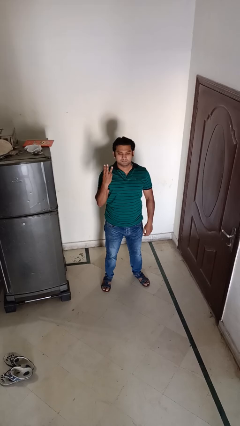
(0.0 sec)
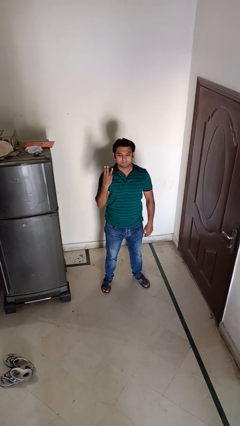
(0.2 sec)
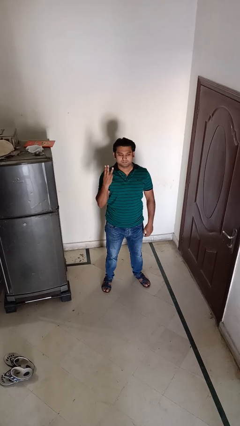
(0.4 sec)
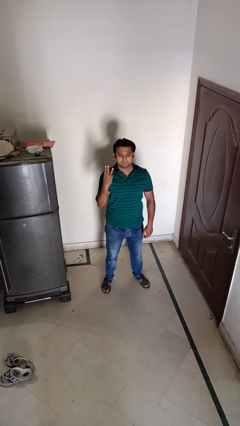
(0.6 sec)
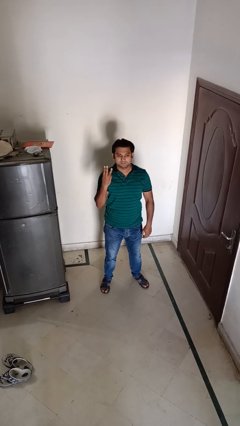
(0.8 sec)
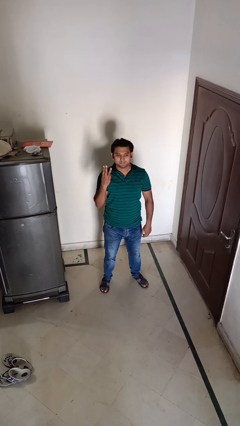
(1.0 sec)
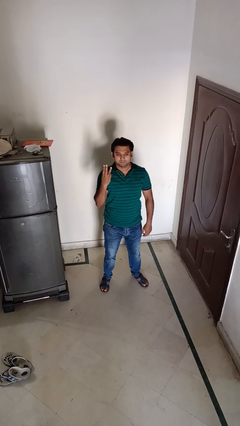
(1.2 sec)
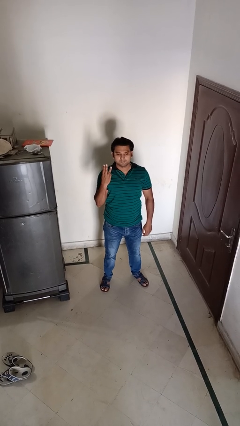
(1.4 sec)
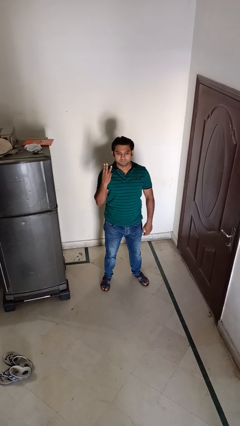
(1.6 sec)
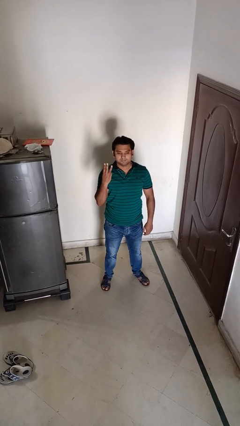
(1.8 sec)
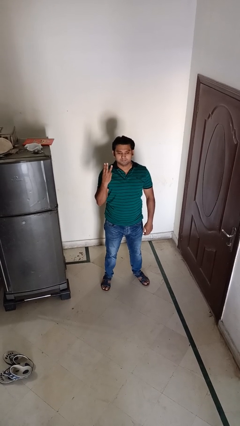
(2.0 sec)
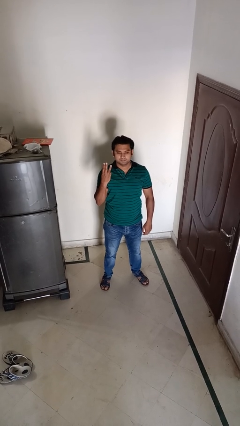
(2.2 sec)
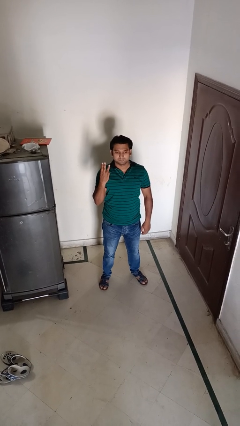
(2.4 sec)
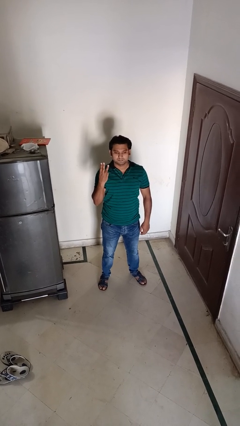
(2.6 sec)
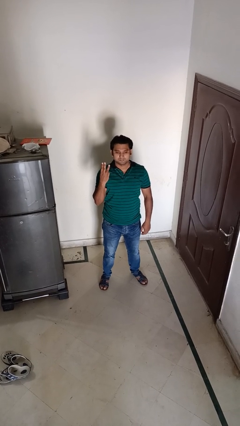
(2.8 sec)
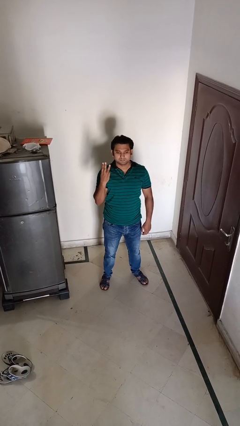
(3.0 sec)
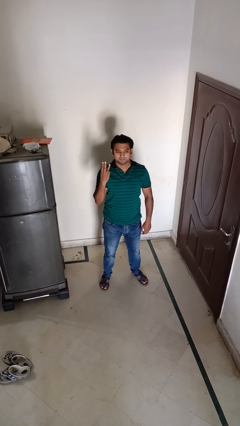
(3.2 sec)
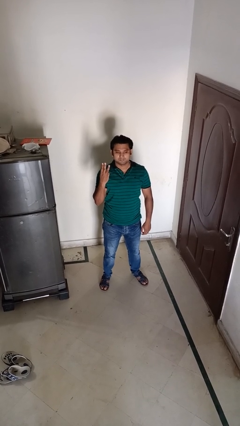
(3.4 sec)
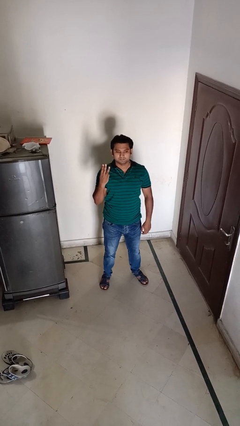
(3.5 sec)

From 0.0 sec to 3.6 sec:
person gestures number three

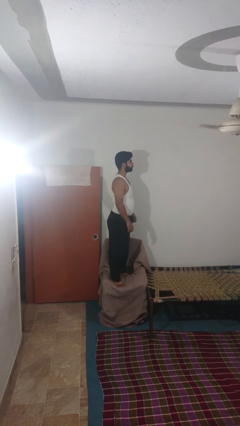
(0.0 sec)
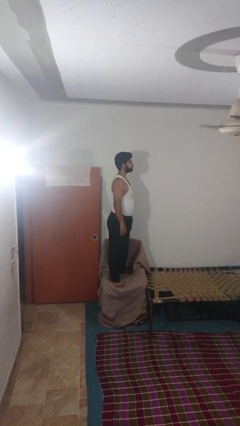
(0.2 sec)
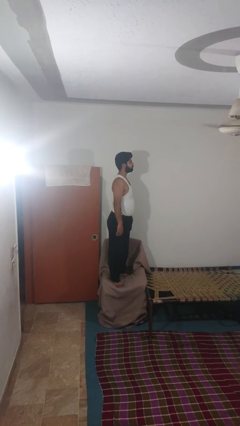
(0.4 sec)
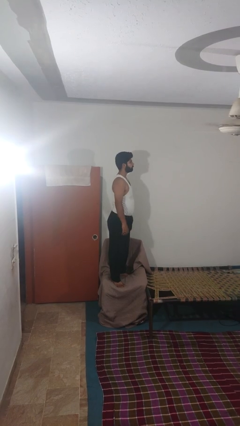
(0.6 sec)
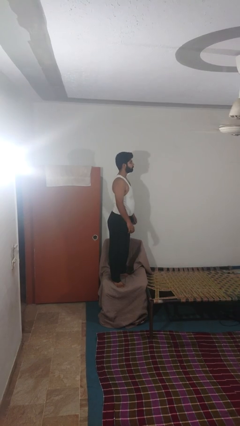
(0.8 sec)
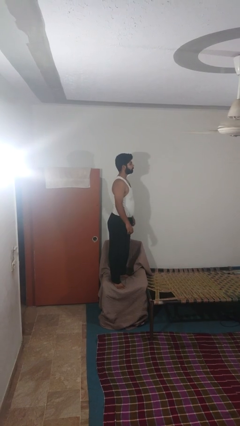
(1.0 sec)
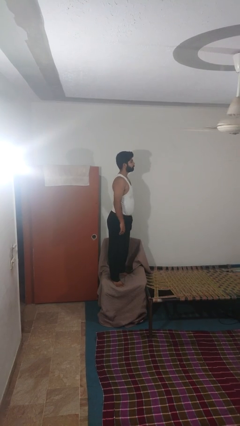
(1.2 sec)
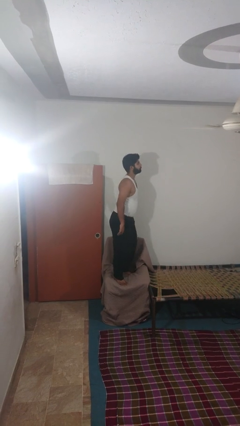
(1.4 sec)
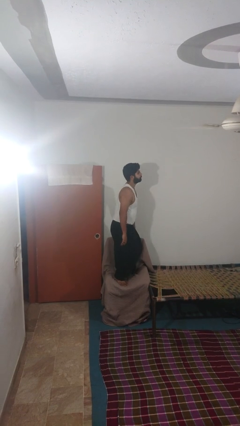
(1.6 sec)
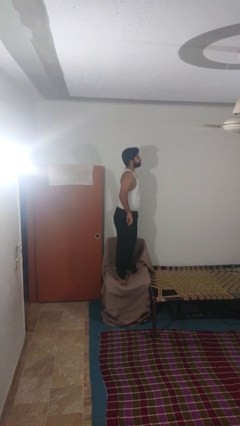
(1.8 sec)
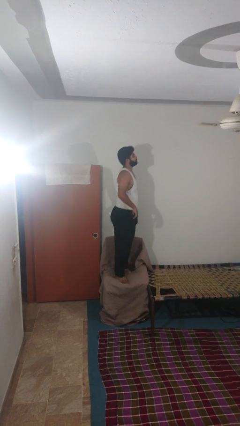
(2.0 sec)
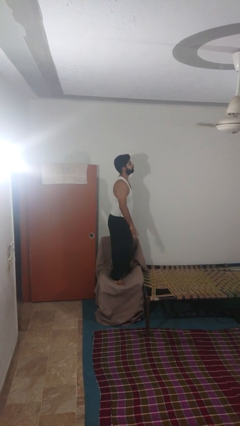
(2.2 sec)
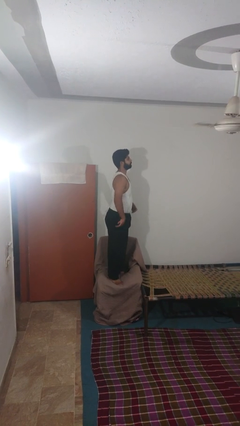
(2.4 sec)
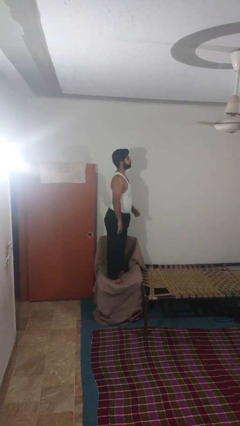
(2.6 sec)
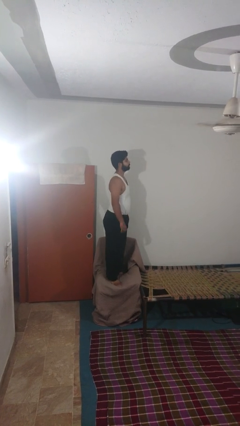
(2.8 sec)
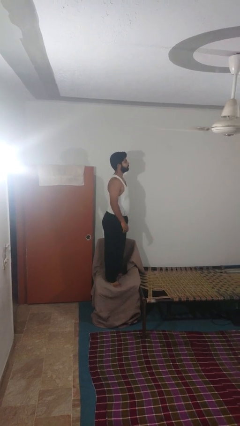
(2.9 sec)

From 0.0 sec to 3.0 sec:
person jumps on couch

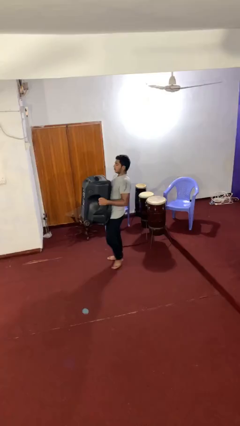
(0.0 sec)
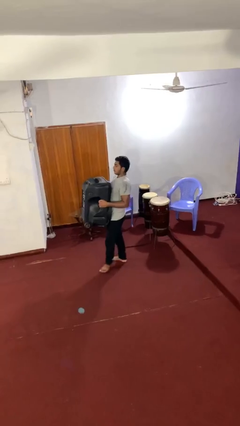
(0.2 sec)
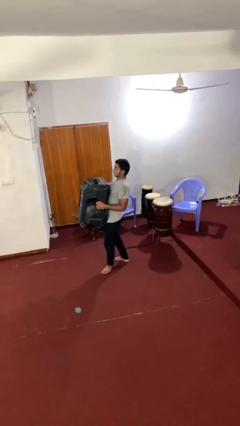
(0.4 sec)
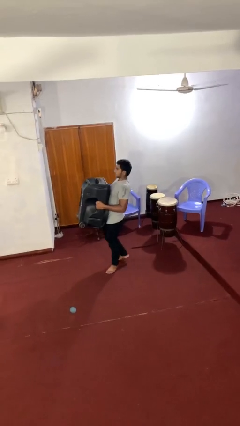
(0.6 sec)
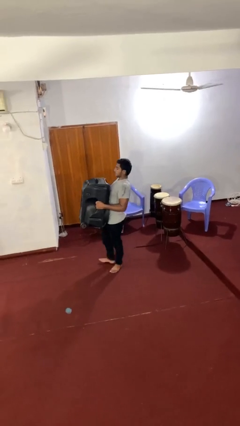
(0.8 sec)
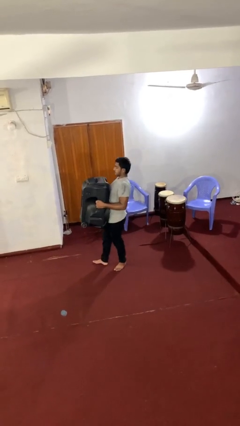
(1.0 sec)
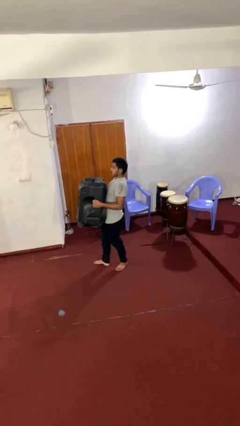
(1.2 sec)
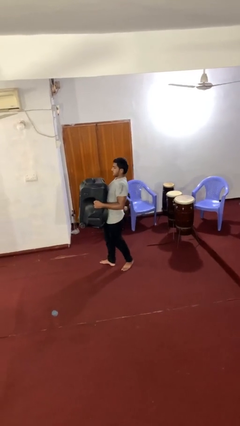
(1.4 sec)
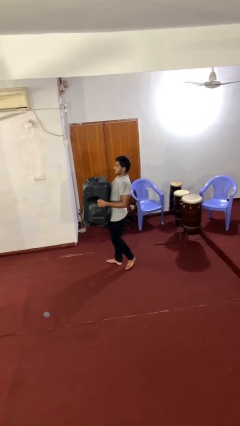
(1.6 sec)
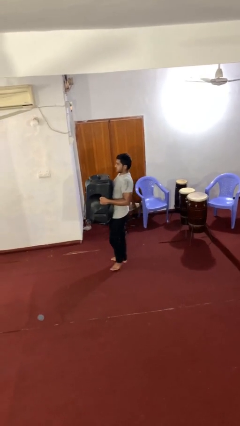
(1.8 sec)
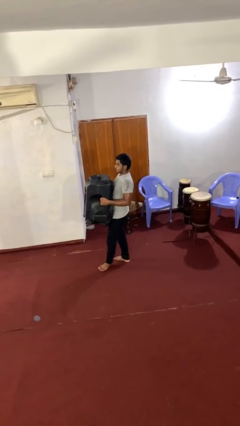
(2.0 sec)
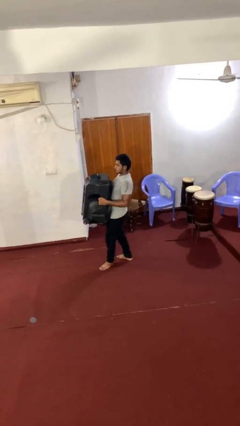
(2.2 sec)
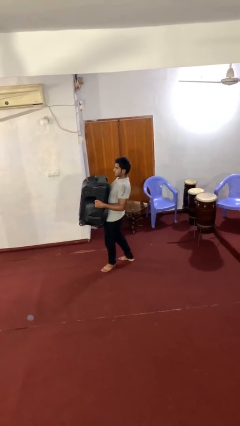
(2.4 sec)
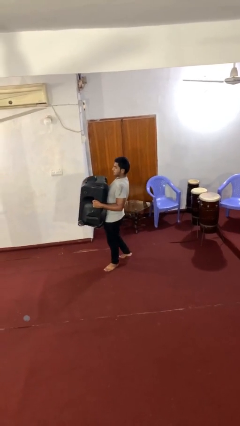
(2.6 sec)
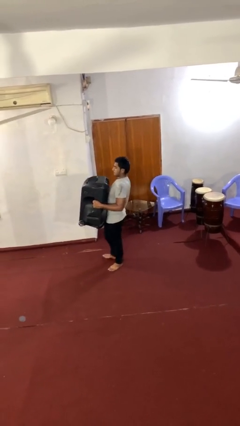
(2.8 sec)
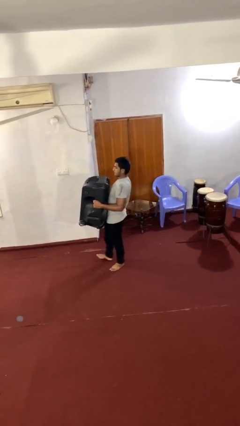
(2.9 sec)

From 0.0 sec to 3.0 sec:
person carries heavy object

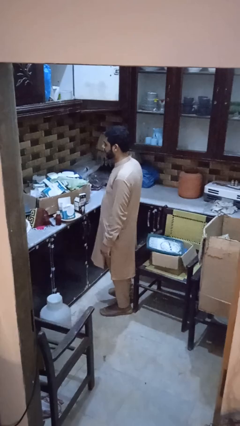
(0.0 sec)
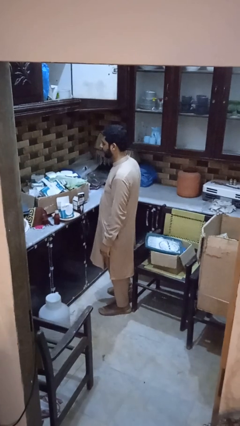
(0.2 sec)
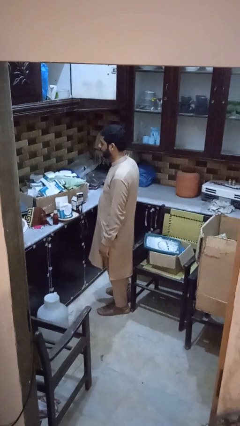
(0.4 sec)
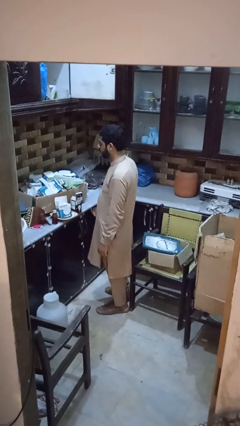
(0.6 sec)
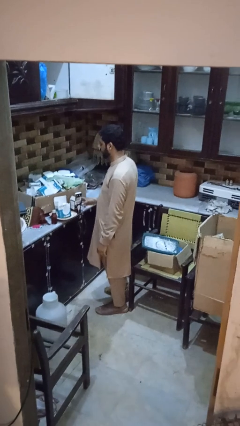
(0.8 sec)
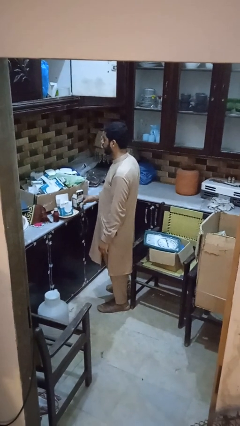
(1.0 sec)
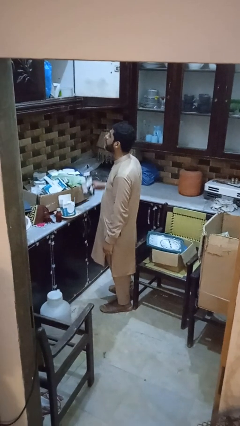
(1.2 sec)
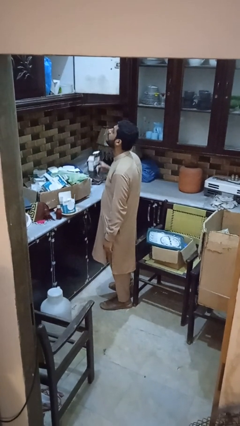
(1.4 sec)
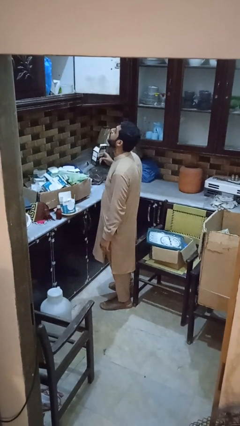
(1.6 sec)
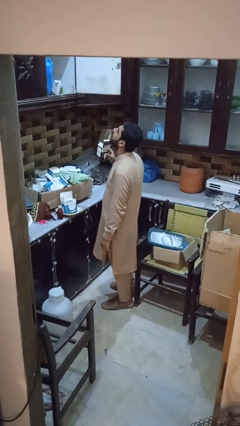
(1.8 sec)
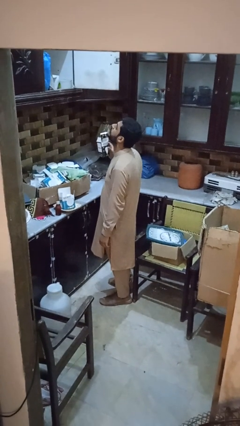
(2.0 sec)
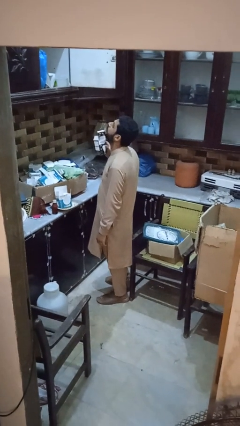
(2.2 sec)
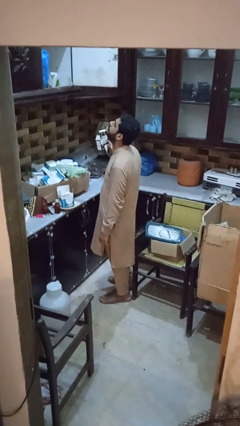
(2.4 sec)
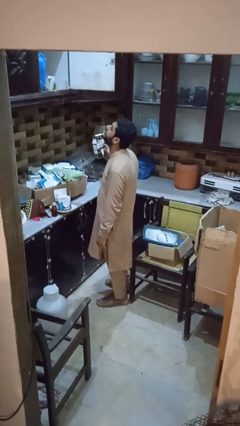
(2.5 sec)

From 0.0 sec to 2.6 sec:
person puts object in cabinet

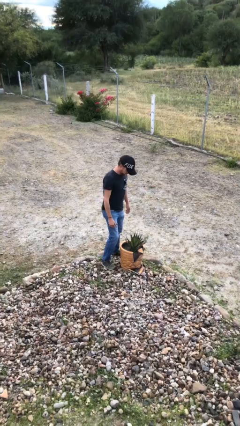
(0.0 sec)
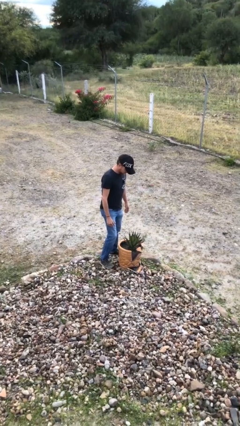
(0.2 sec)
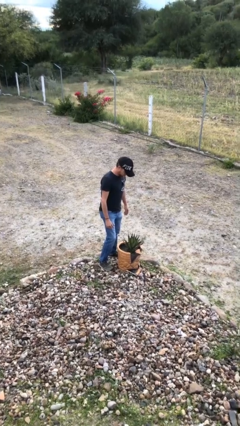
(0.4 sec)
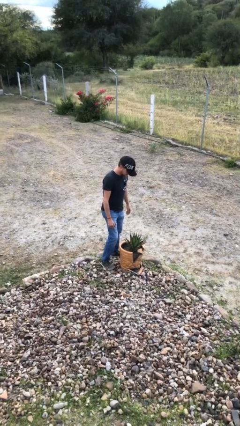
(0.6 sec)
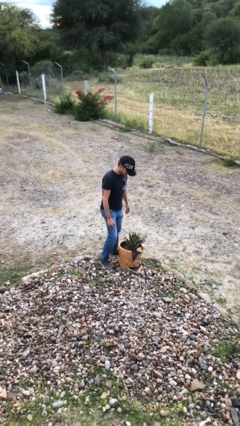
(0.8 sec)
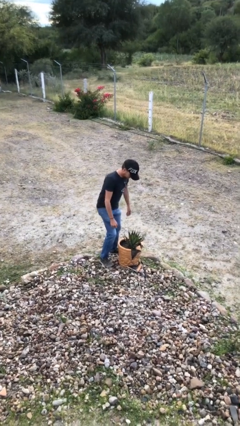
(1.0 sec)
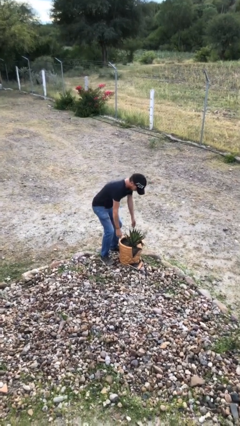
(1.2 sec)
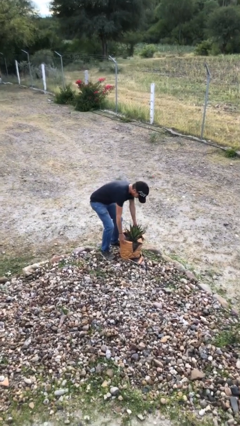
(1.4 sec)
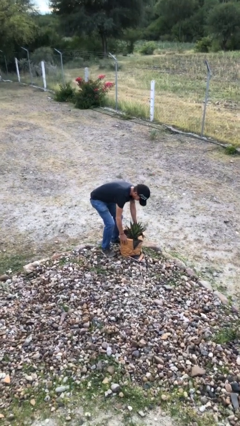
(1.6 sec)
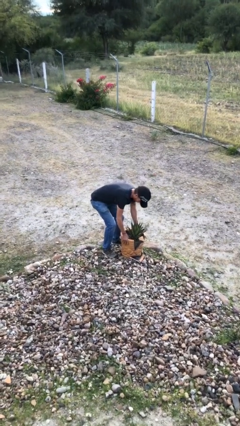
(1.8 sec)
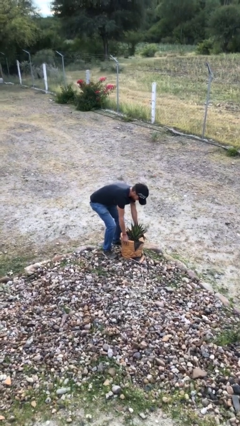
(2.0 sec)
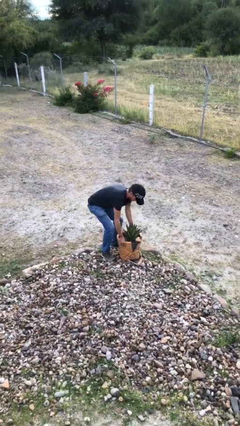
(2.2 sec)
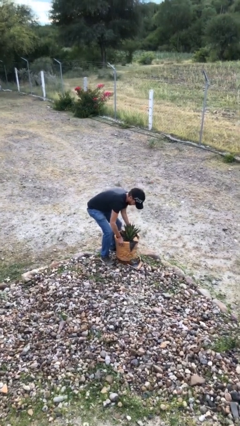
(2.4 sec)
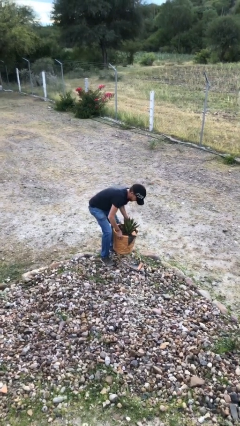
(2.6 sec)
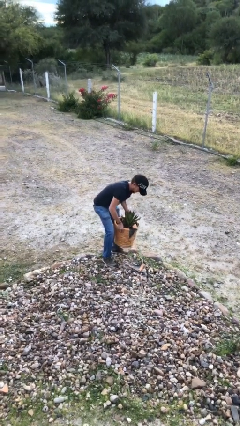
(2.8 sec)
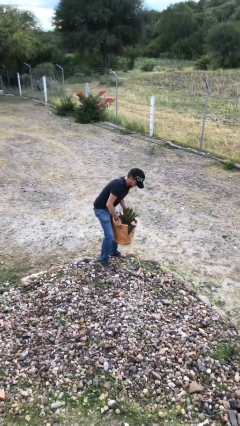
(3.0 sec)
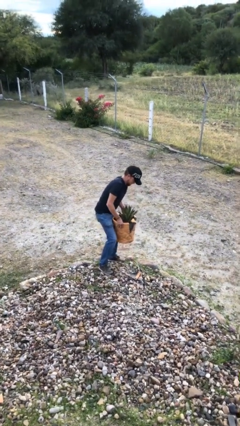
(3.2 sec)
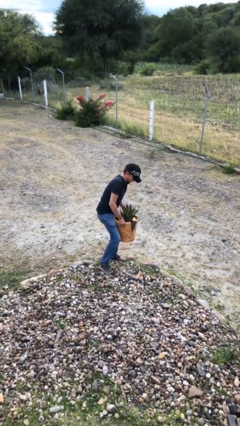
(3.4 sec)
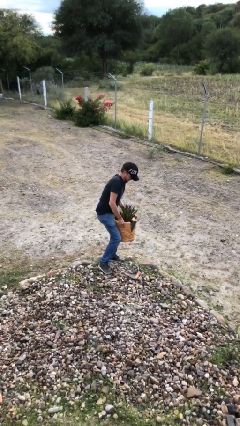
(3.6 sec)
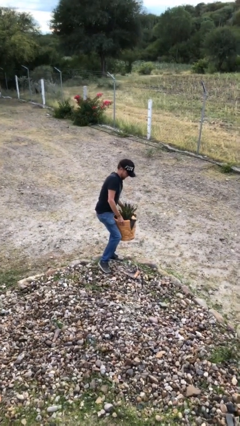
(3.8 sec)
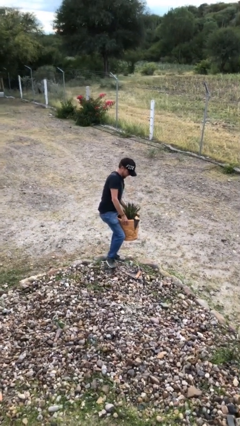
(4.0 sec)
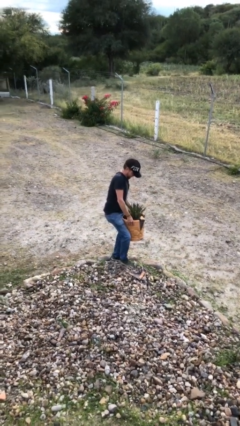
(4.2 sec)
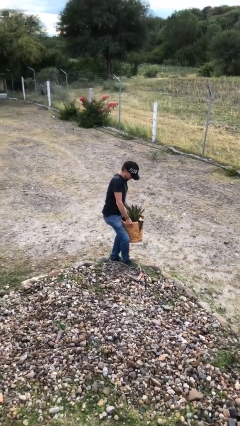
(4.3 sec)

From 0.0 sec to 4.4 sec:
person picks up object from floor

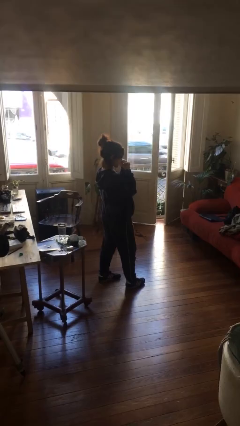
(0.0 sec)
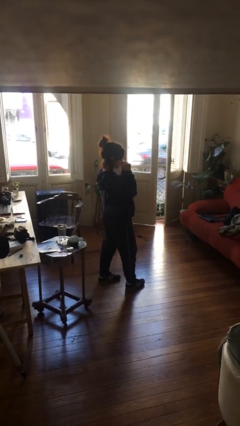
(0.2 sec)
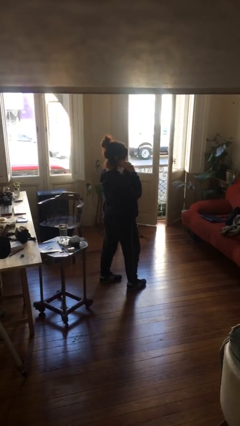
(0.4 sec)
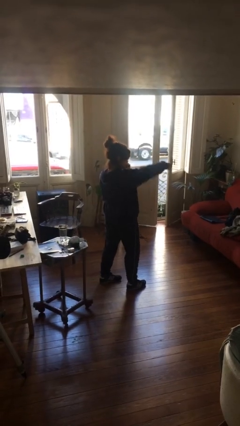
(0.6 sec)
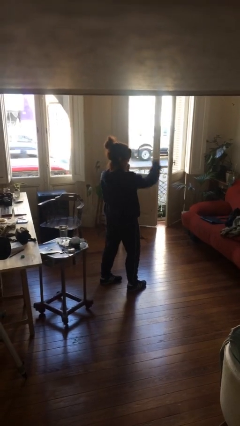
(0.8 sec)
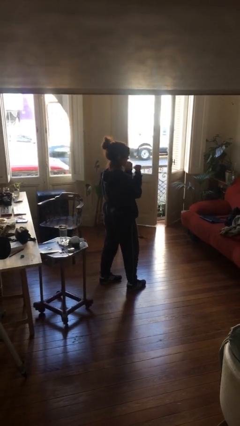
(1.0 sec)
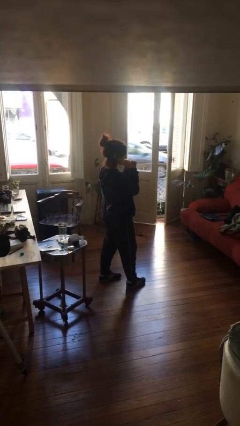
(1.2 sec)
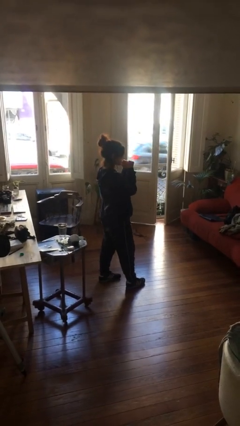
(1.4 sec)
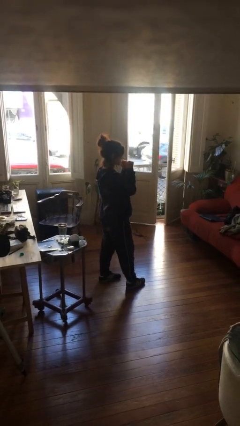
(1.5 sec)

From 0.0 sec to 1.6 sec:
person punches
